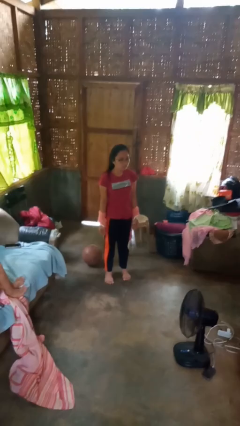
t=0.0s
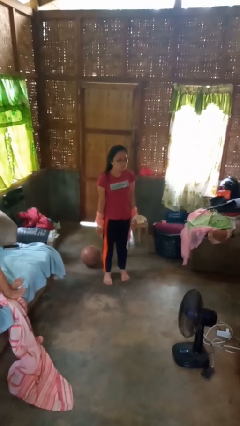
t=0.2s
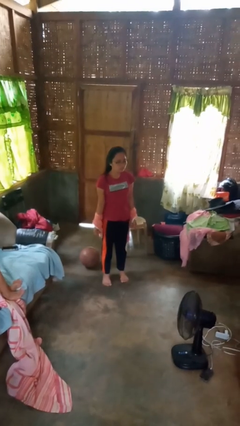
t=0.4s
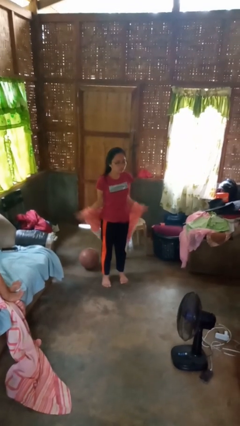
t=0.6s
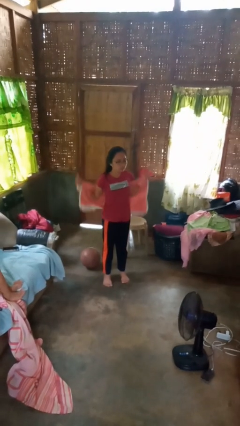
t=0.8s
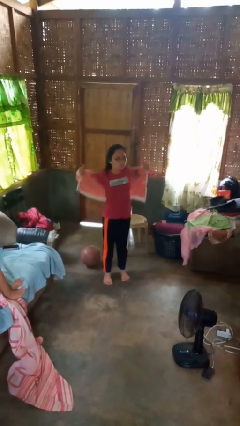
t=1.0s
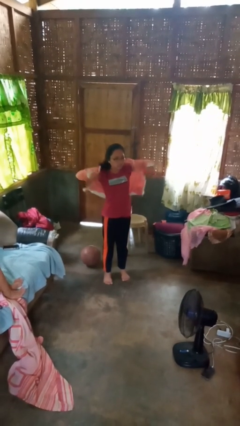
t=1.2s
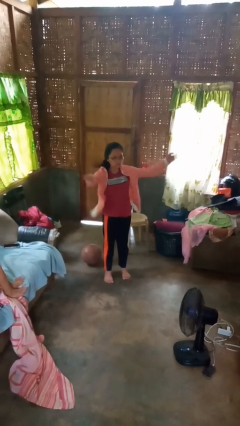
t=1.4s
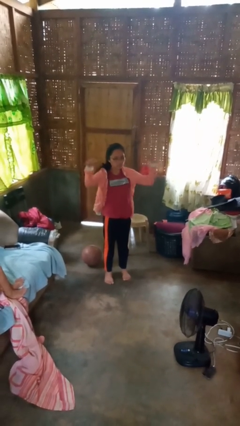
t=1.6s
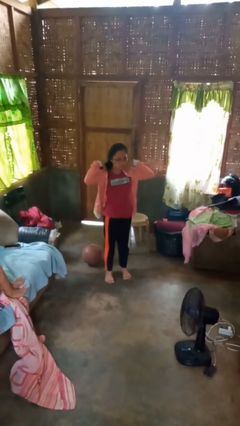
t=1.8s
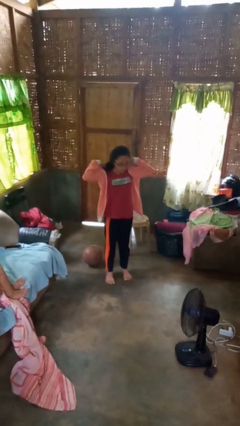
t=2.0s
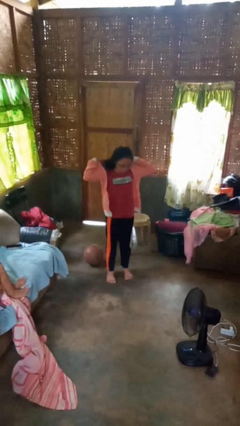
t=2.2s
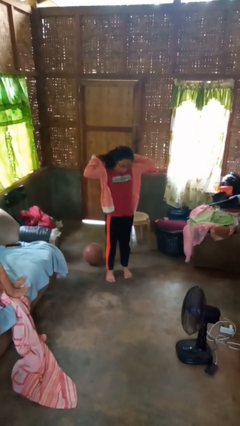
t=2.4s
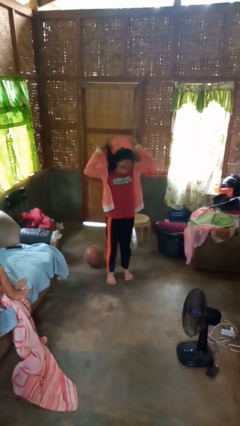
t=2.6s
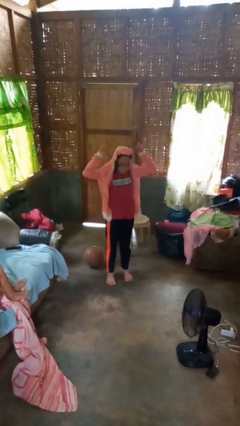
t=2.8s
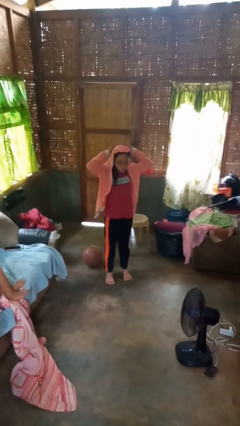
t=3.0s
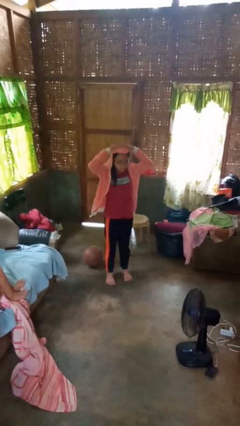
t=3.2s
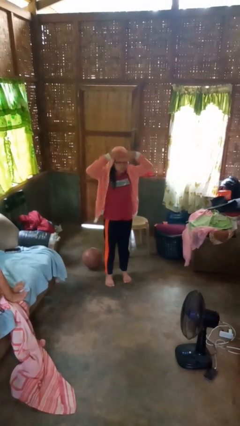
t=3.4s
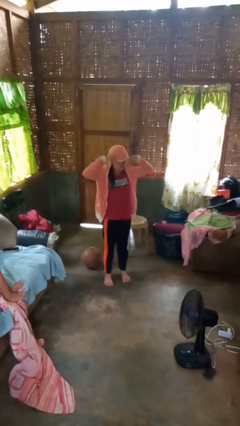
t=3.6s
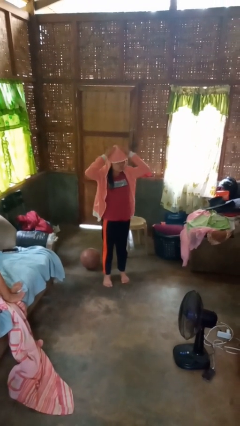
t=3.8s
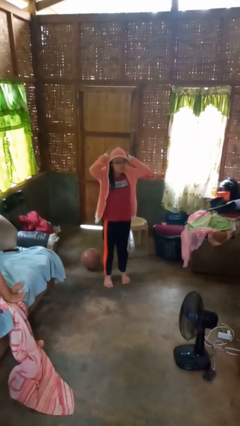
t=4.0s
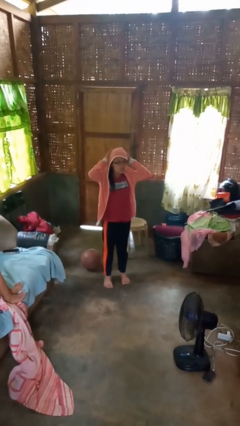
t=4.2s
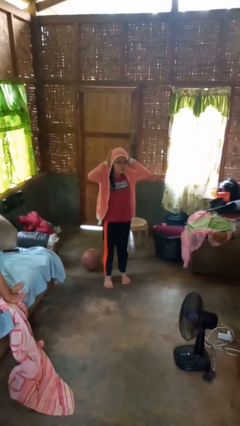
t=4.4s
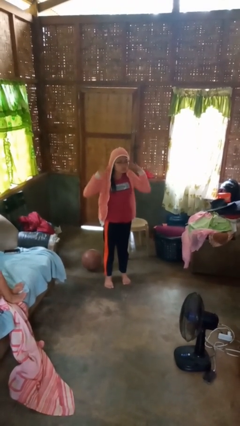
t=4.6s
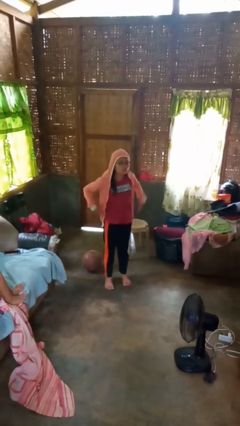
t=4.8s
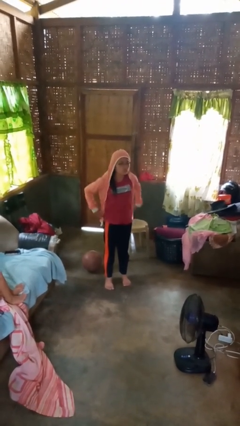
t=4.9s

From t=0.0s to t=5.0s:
person puts on hoodie

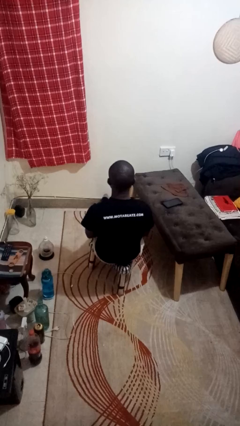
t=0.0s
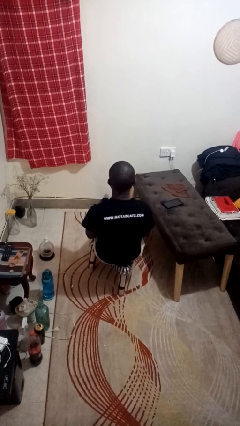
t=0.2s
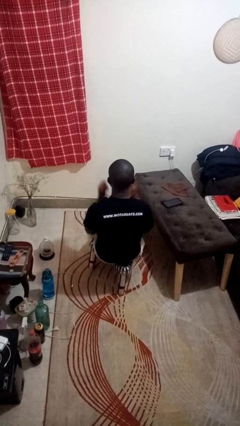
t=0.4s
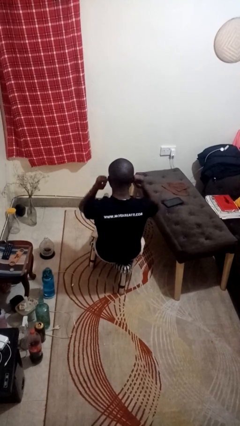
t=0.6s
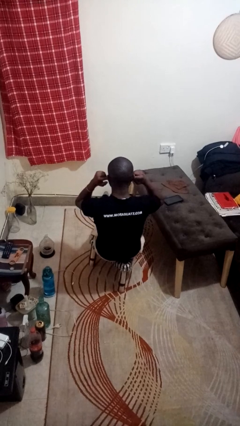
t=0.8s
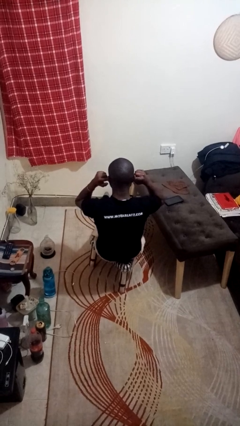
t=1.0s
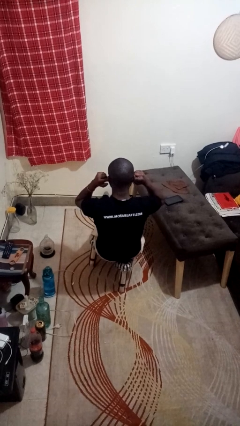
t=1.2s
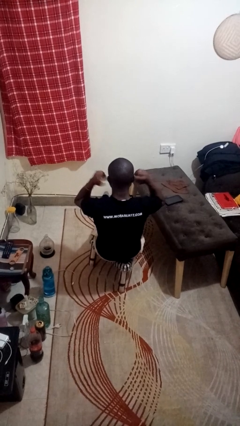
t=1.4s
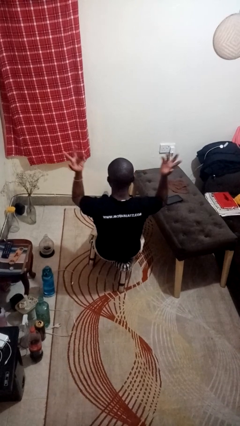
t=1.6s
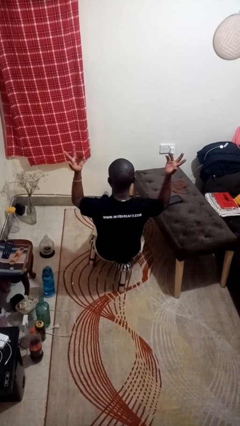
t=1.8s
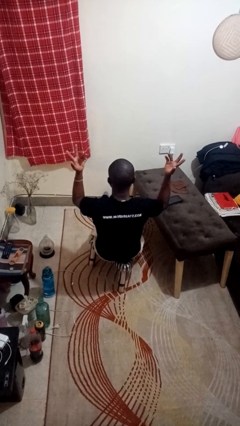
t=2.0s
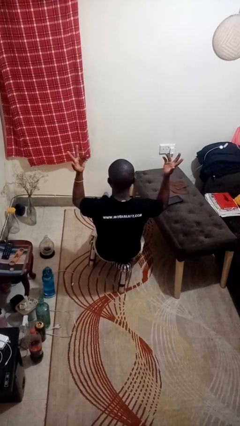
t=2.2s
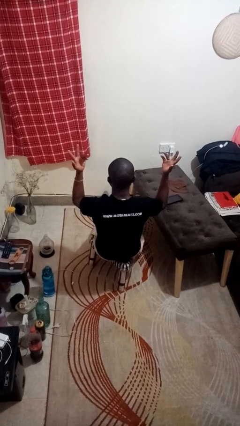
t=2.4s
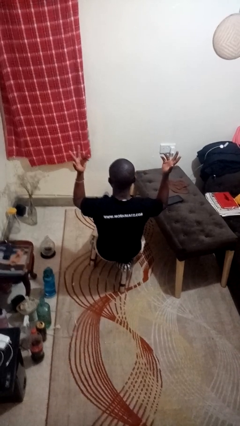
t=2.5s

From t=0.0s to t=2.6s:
person puts fingers in ear

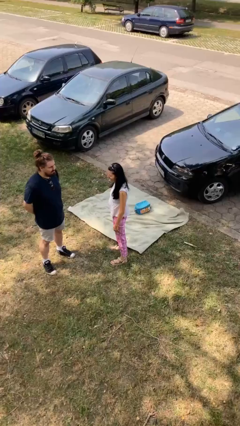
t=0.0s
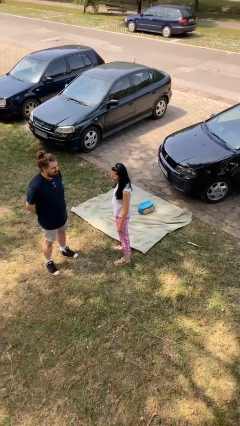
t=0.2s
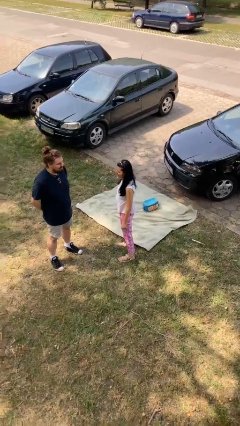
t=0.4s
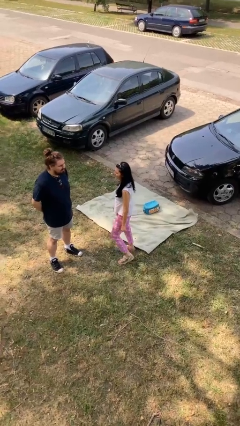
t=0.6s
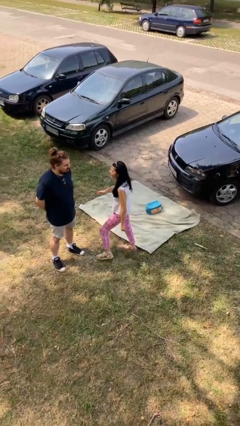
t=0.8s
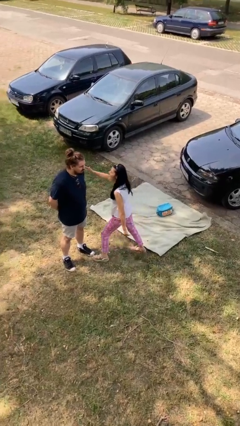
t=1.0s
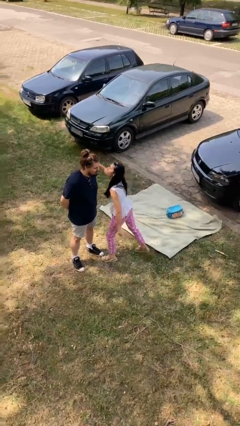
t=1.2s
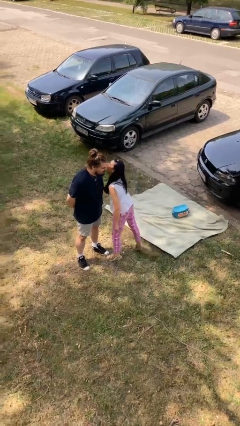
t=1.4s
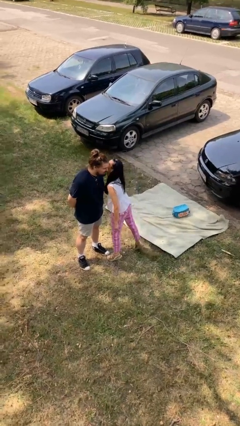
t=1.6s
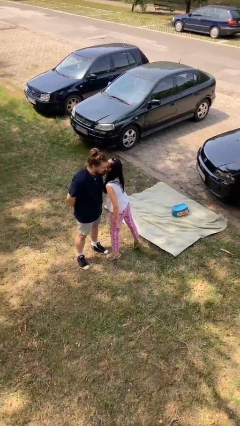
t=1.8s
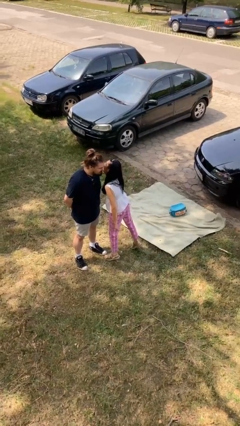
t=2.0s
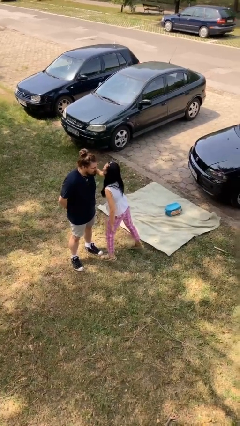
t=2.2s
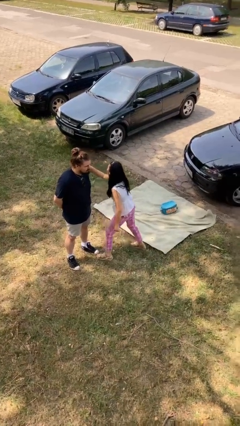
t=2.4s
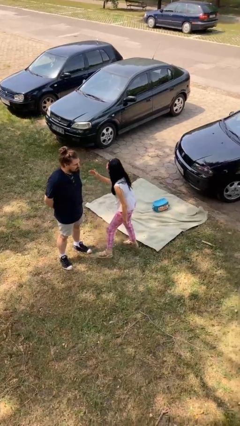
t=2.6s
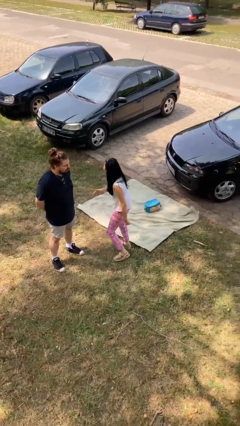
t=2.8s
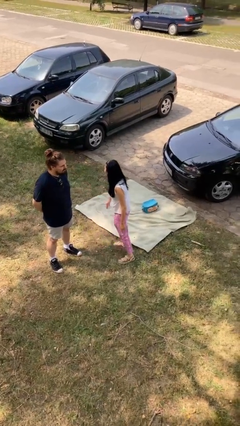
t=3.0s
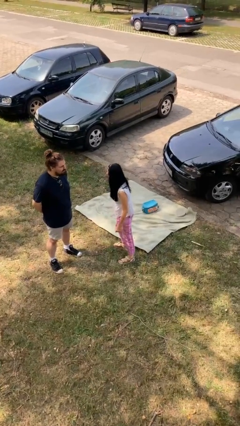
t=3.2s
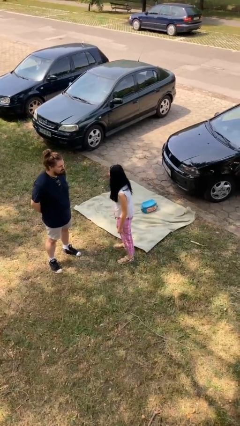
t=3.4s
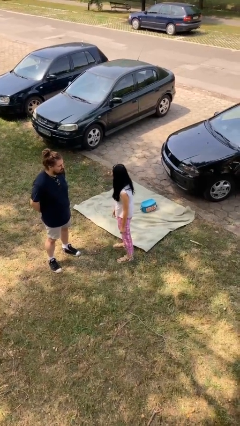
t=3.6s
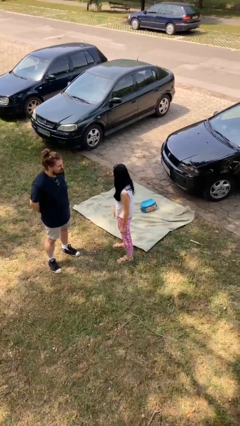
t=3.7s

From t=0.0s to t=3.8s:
person kisses cheek of person

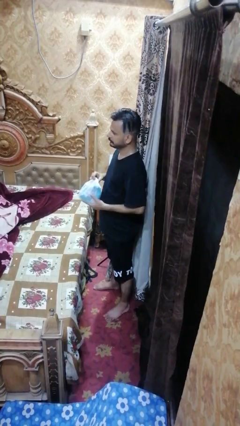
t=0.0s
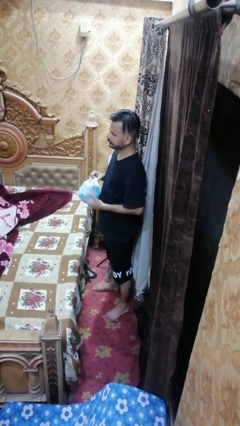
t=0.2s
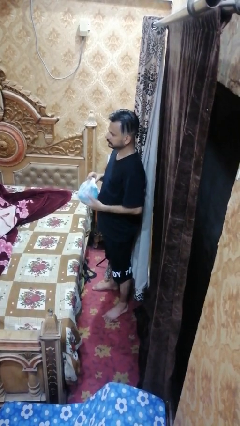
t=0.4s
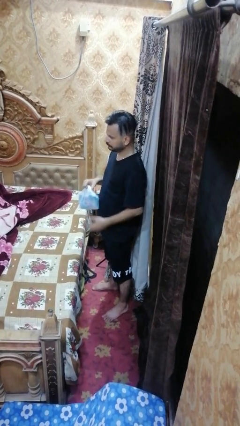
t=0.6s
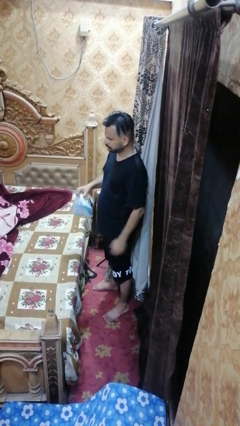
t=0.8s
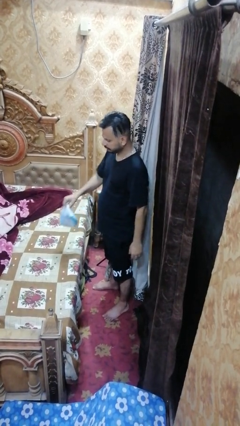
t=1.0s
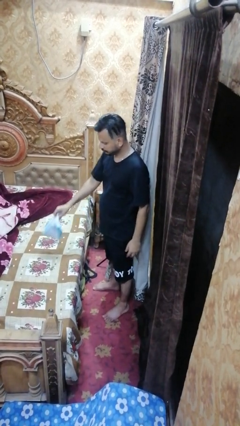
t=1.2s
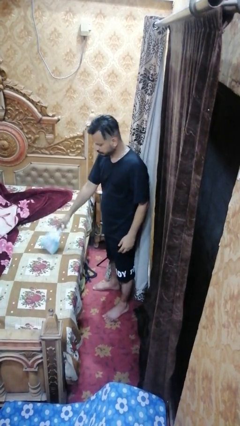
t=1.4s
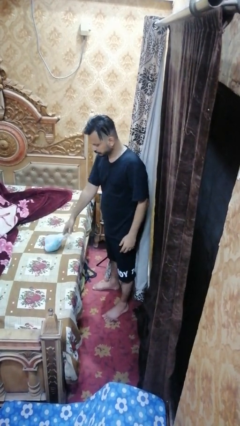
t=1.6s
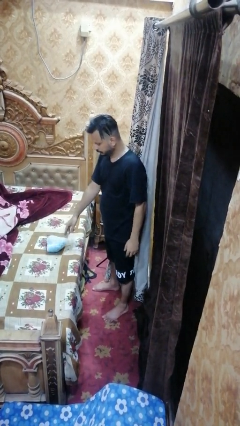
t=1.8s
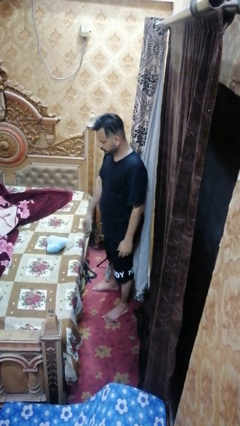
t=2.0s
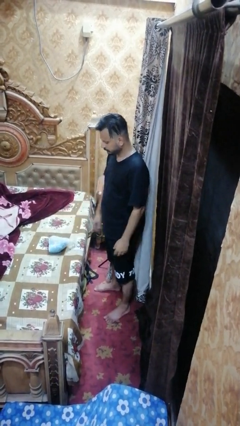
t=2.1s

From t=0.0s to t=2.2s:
person puts down object on bed

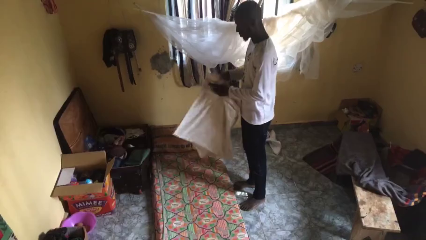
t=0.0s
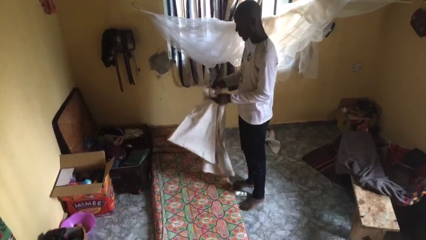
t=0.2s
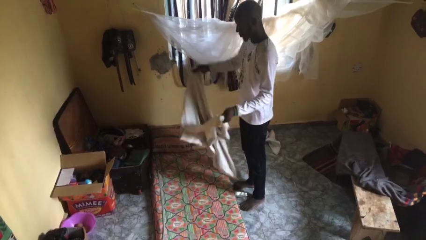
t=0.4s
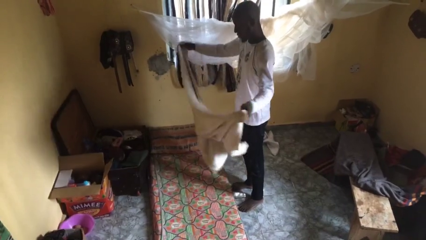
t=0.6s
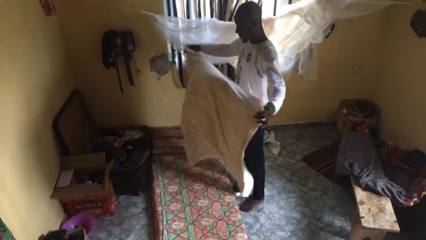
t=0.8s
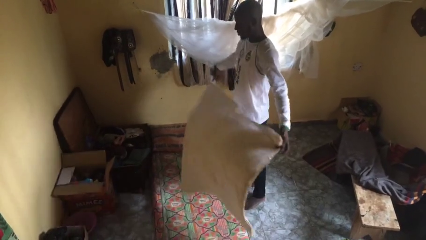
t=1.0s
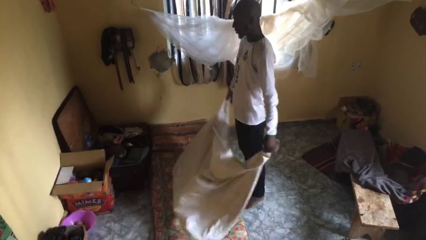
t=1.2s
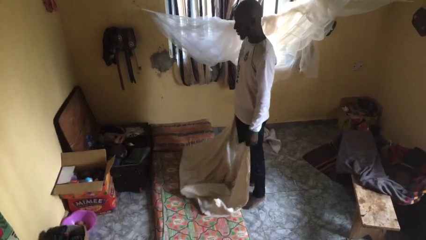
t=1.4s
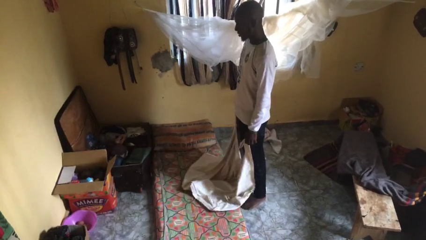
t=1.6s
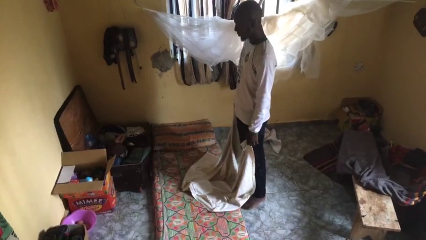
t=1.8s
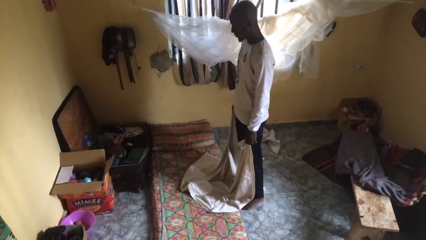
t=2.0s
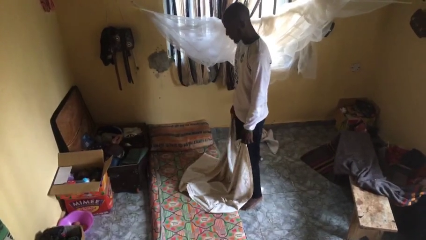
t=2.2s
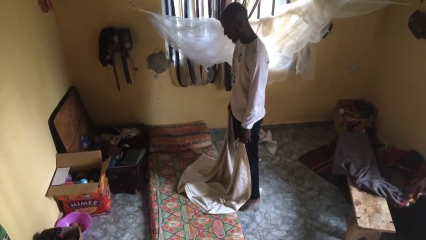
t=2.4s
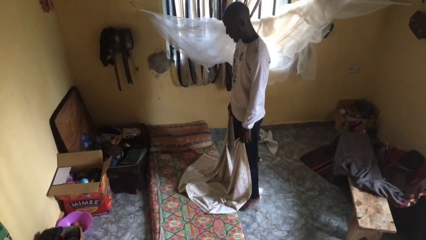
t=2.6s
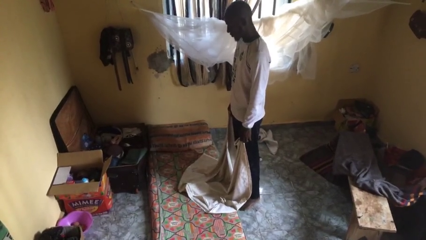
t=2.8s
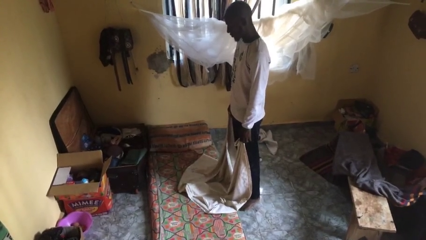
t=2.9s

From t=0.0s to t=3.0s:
person unfolds blanket

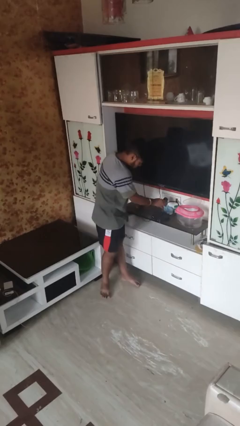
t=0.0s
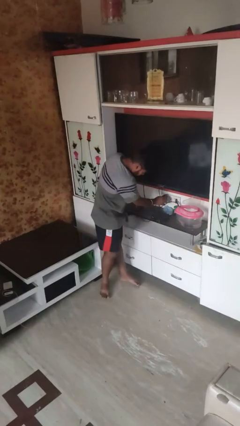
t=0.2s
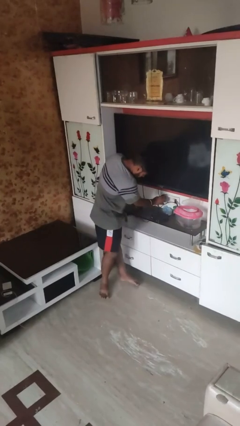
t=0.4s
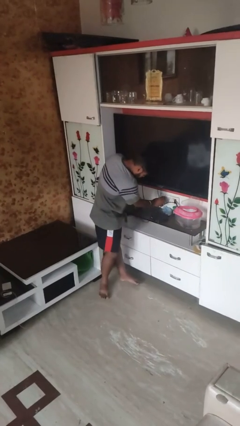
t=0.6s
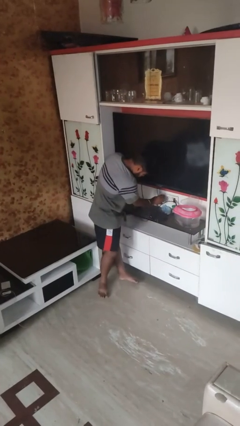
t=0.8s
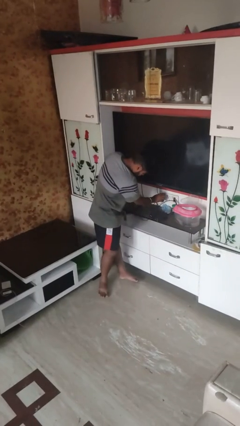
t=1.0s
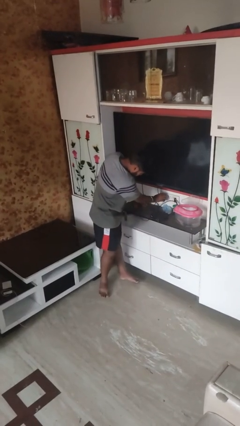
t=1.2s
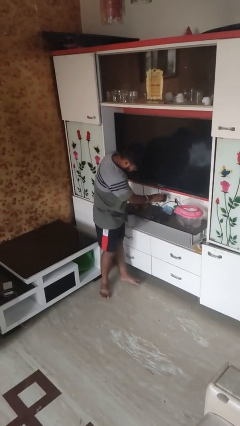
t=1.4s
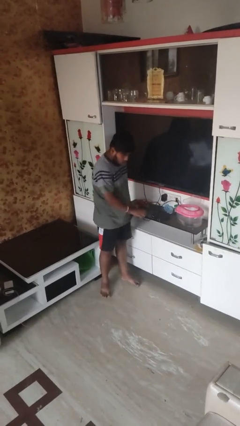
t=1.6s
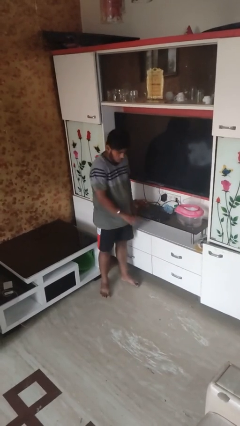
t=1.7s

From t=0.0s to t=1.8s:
person plugs into electrical socket
